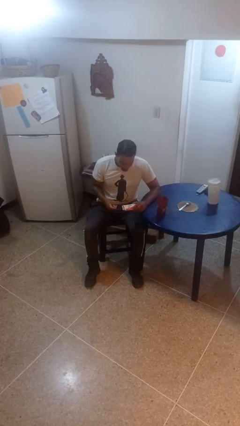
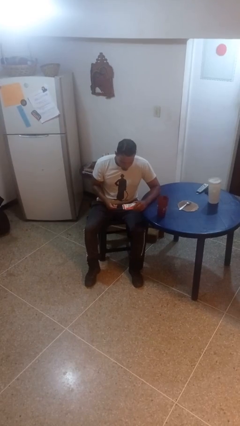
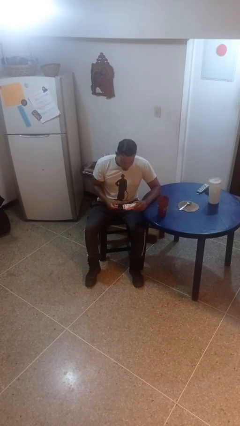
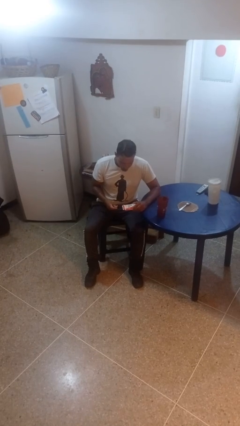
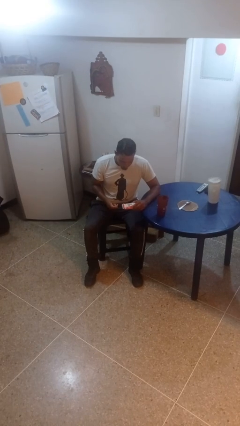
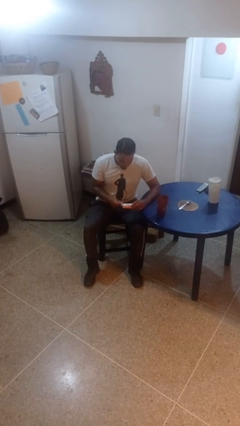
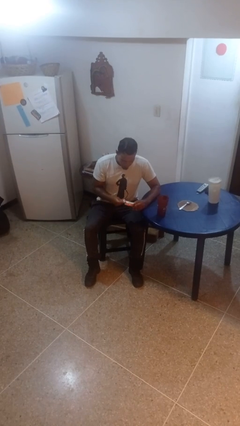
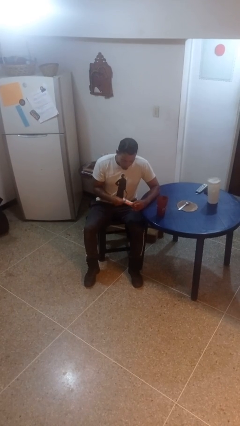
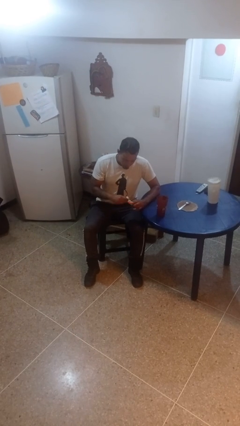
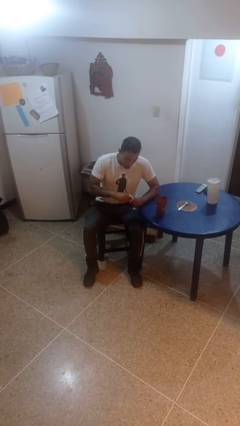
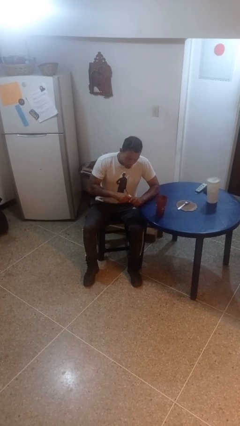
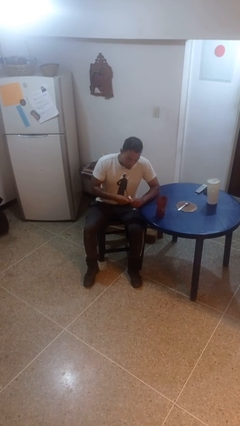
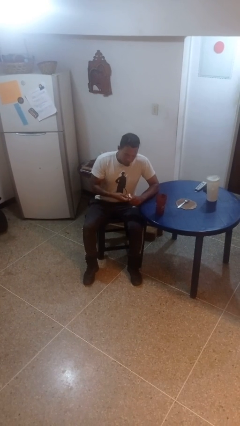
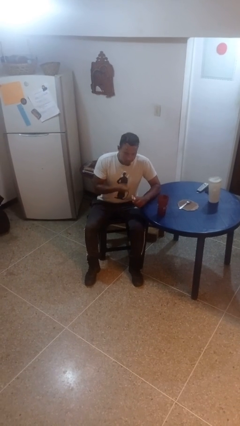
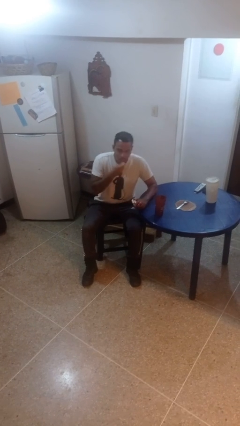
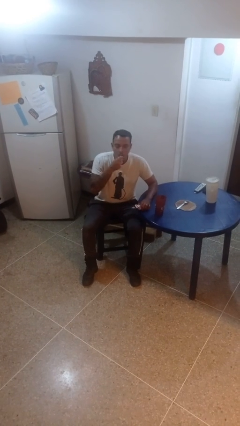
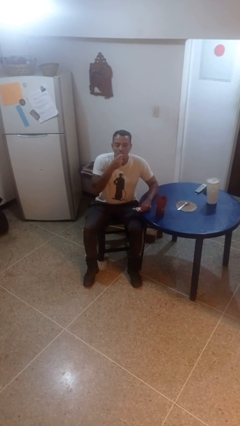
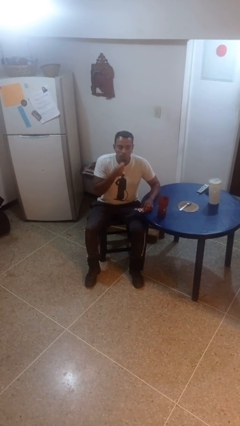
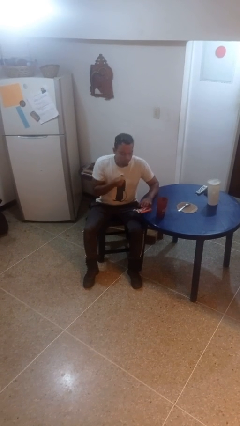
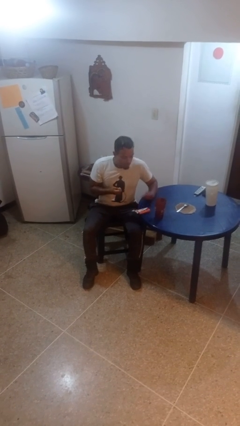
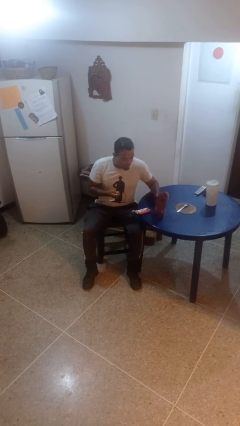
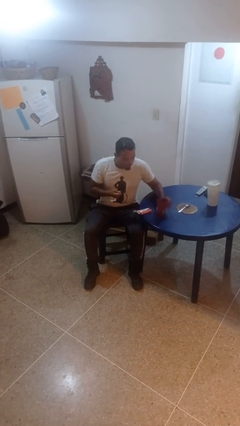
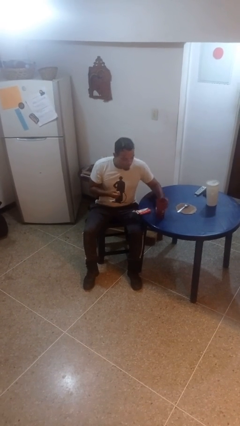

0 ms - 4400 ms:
person takes medicine pills

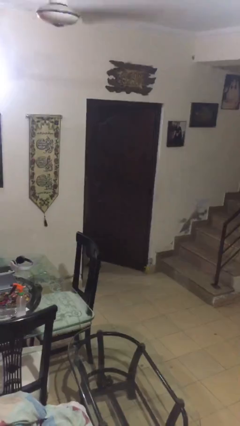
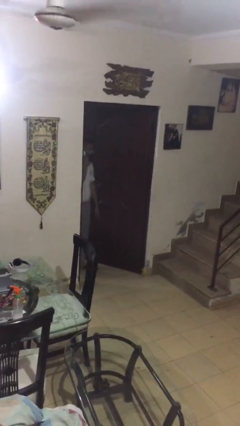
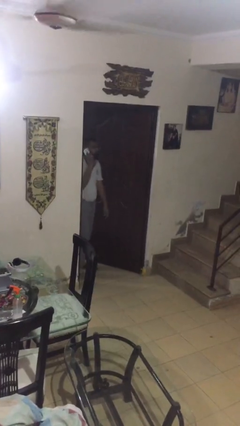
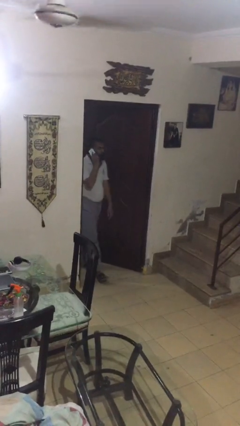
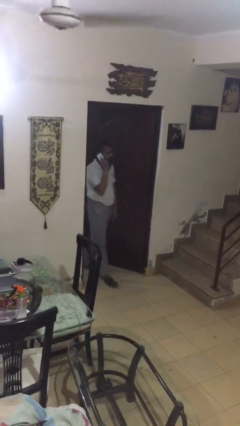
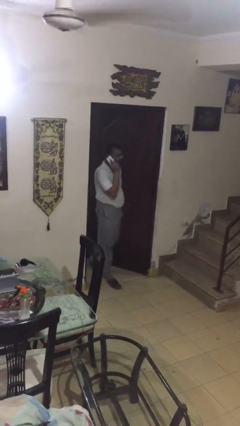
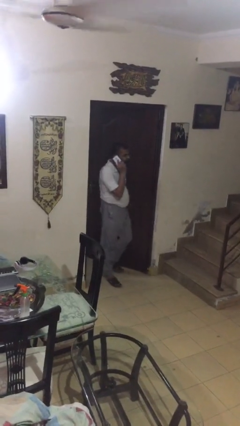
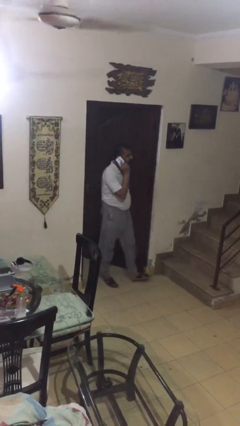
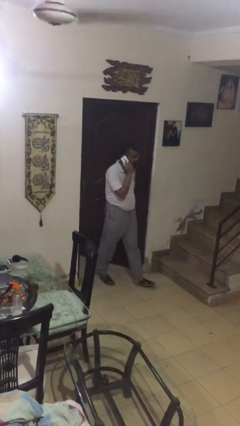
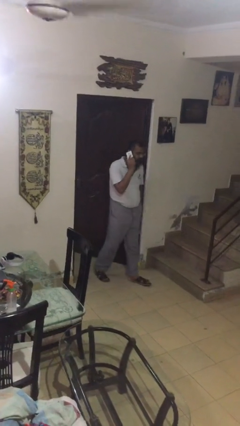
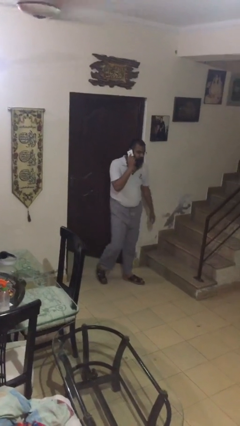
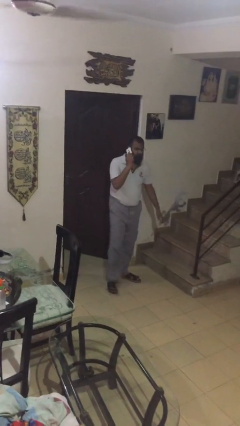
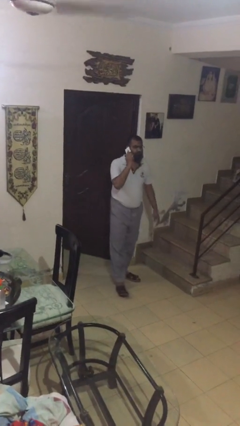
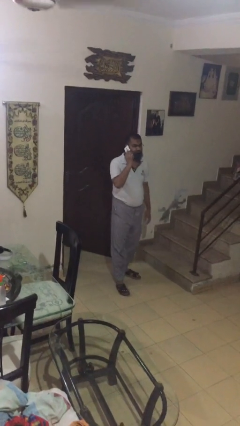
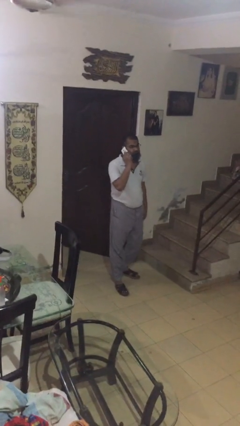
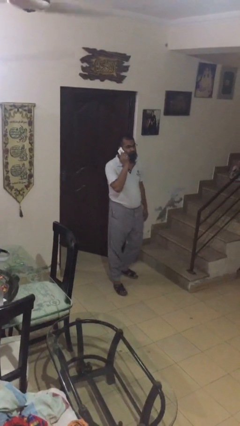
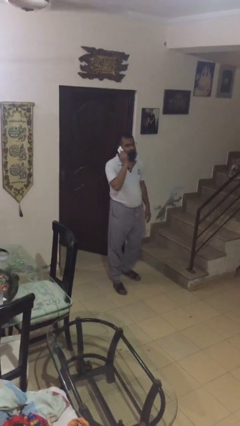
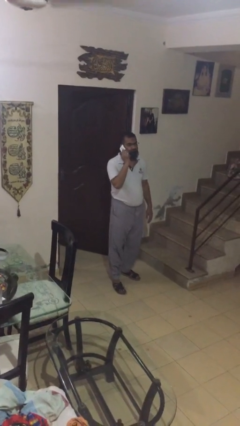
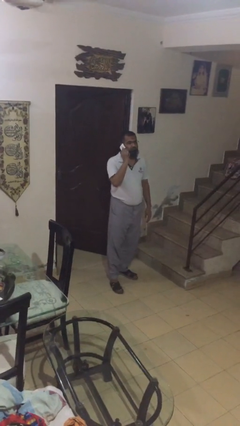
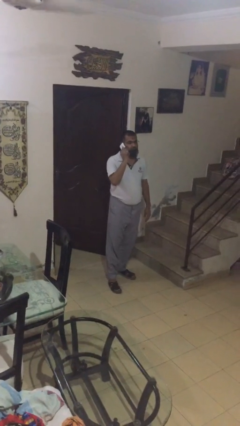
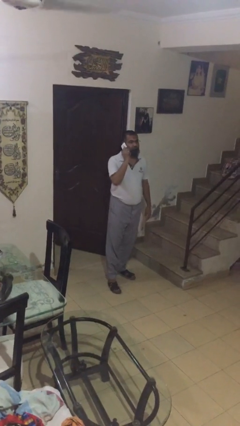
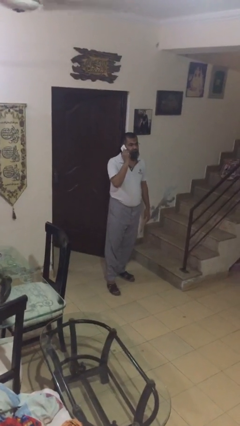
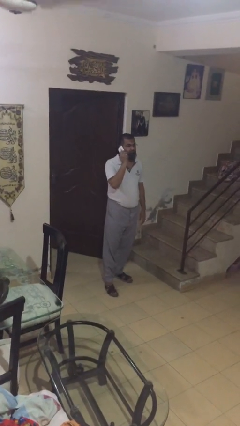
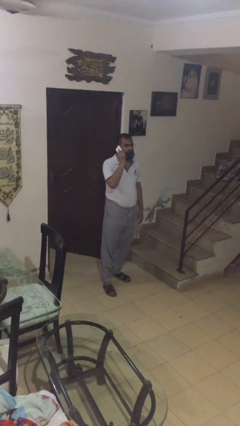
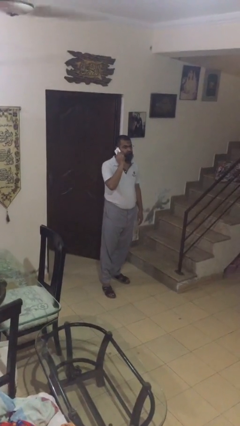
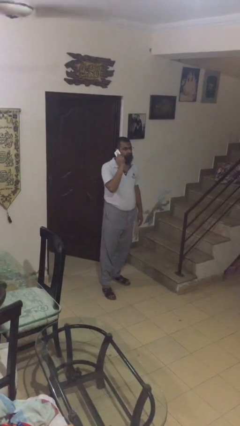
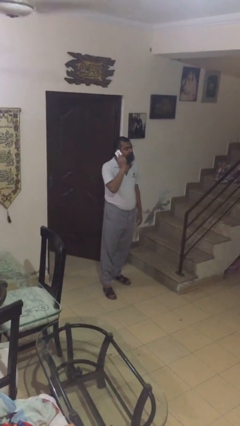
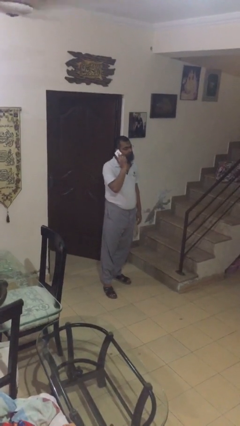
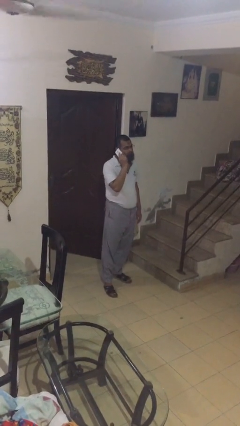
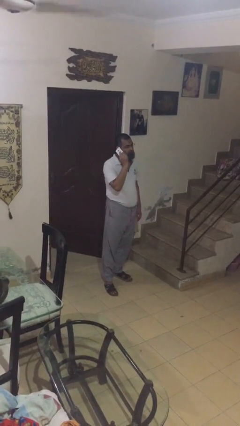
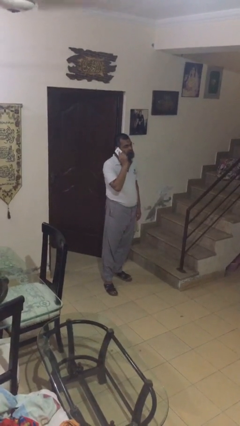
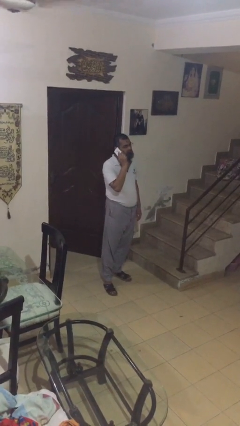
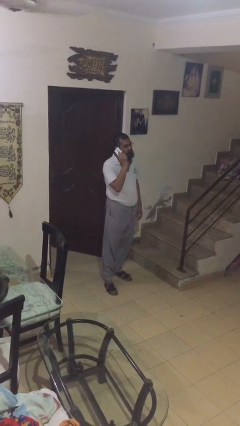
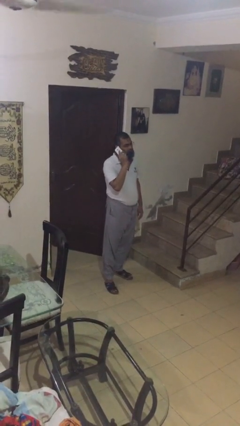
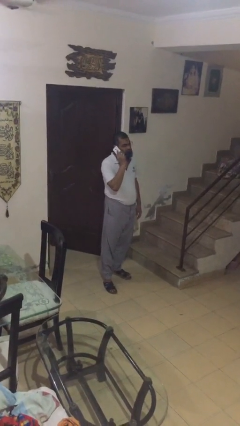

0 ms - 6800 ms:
person enters scene through structure

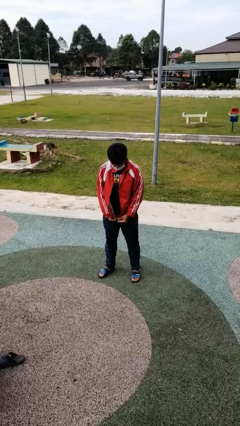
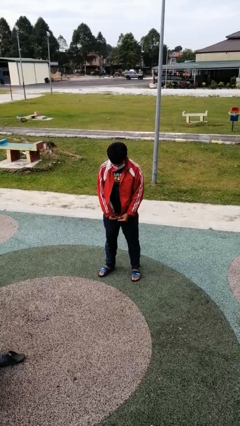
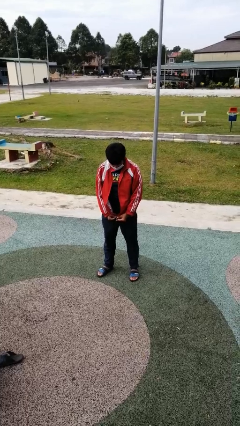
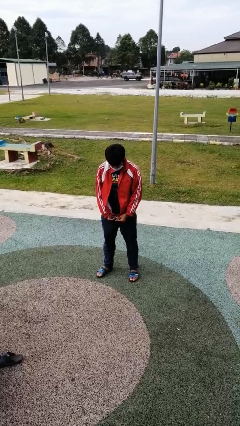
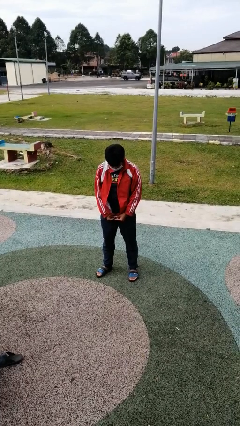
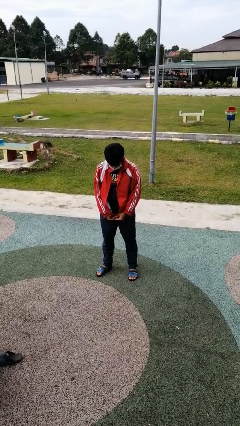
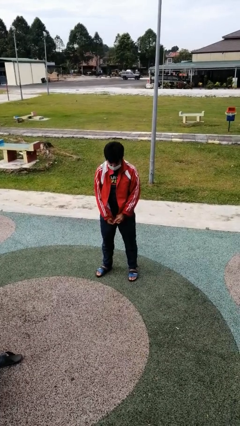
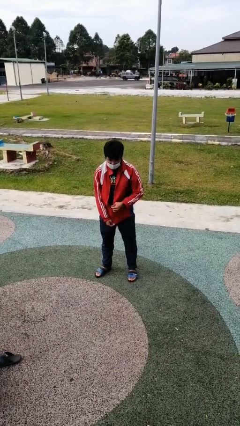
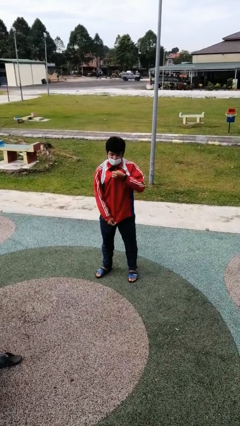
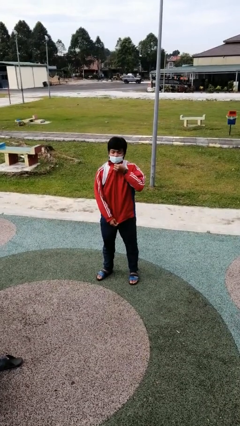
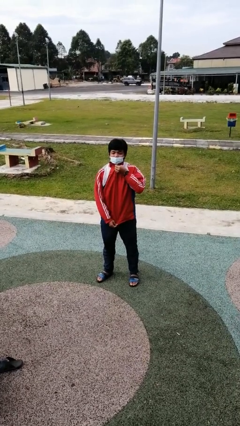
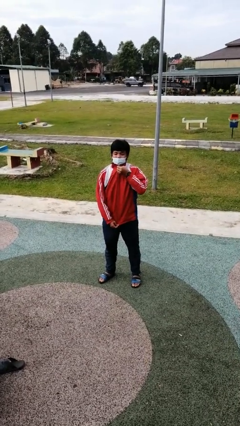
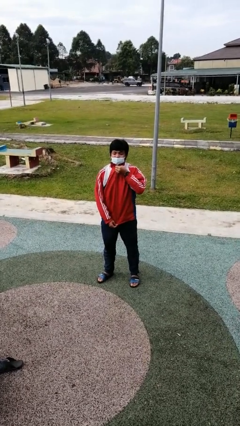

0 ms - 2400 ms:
person zips up jacket

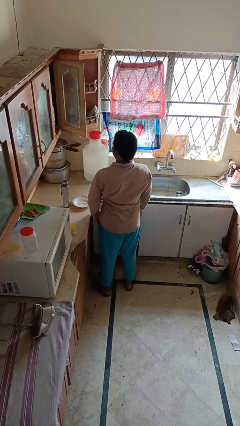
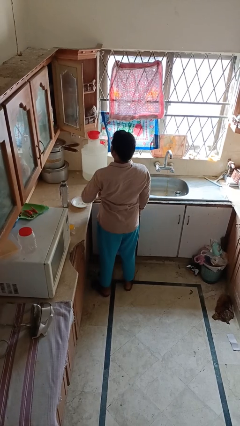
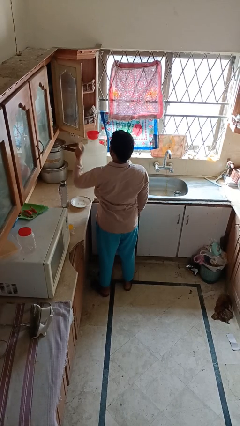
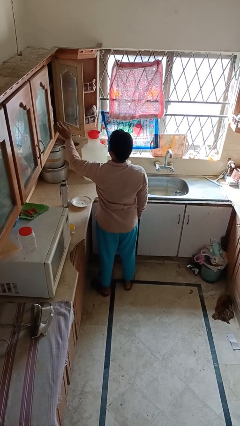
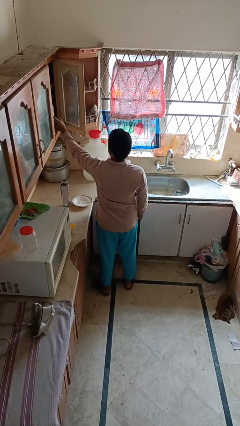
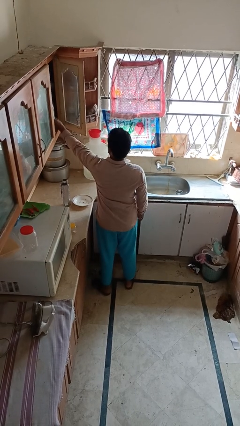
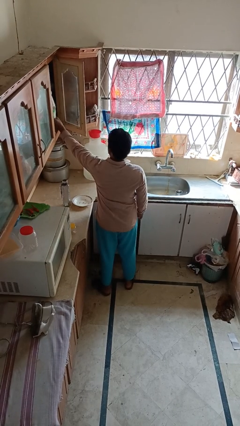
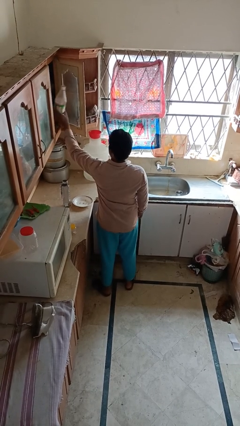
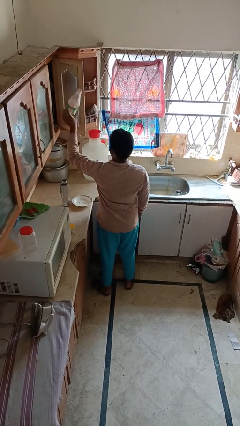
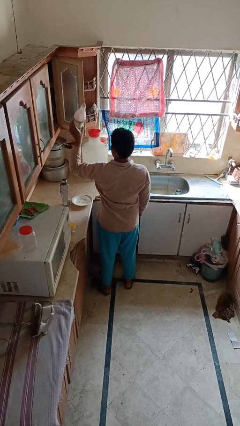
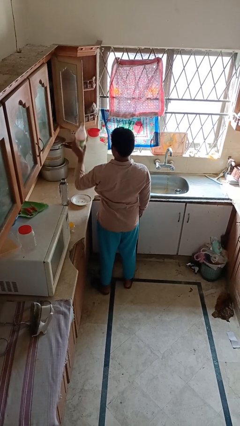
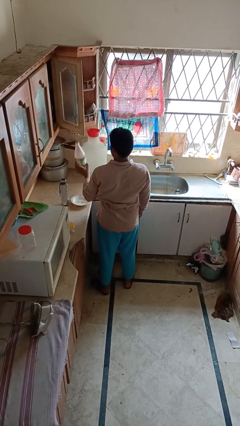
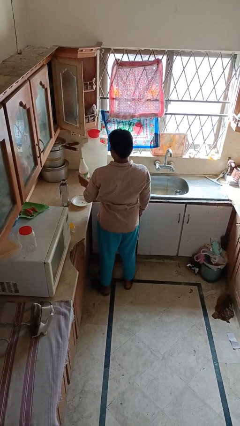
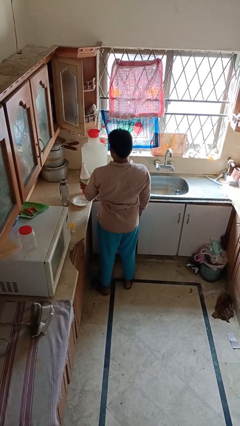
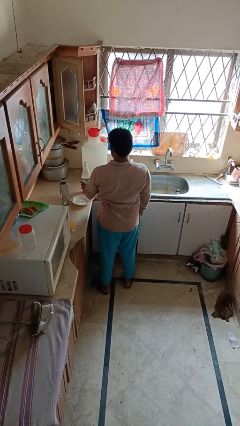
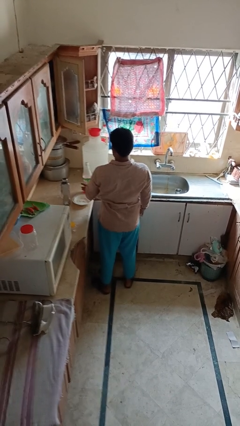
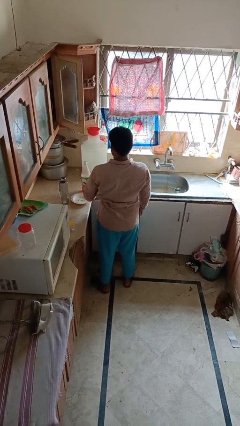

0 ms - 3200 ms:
person takes object from cabinet

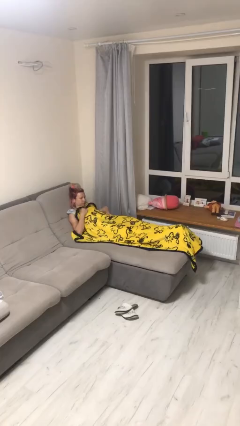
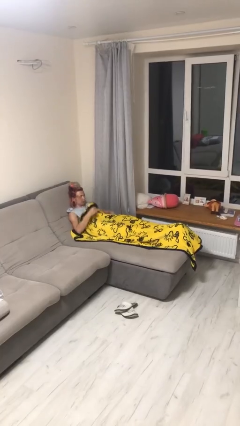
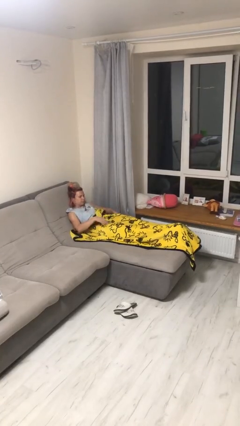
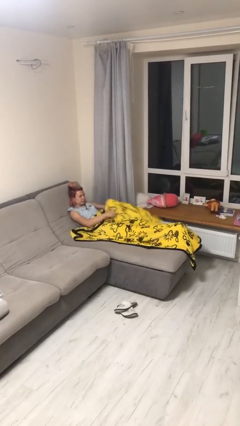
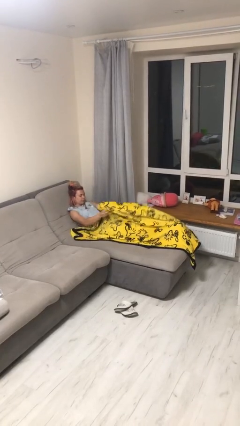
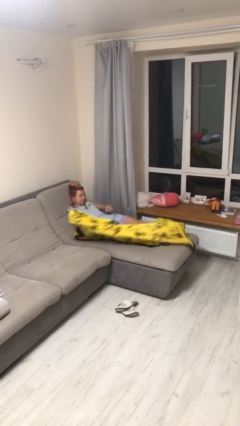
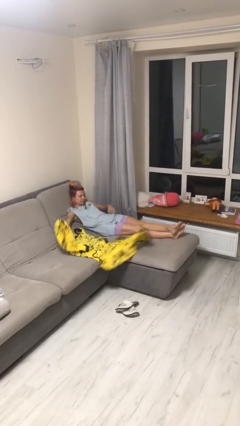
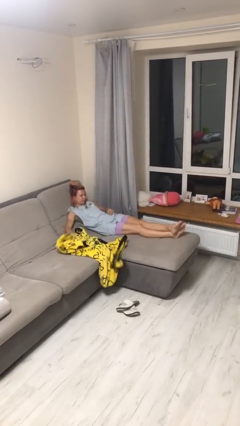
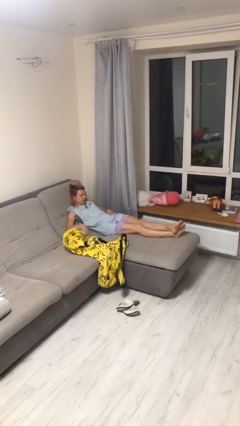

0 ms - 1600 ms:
person uncovers with blanket
